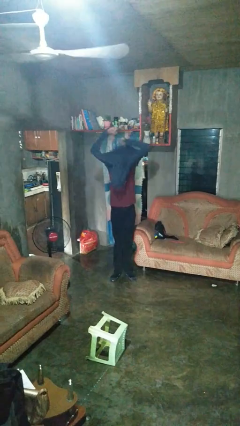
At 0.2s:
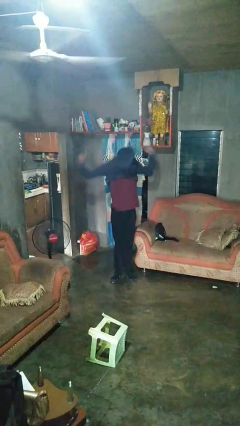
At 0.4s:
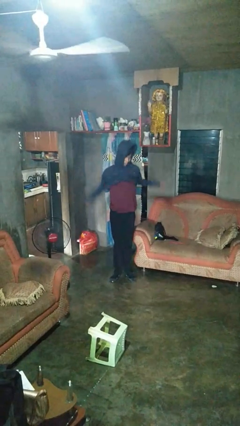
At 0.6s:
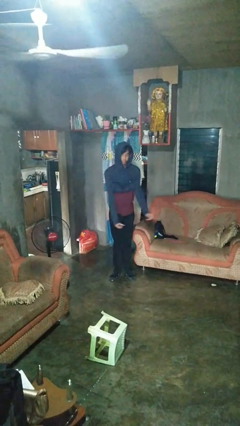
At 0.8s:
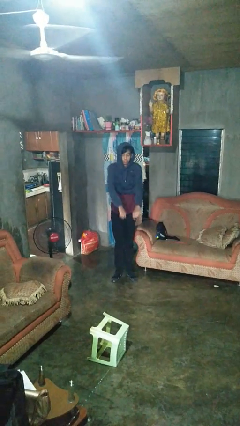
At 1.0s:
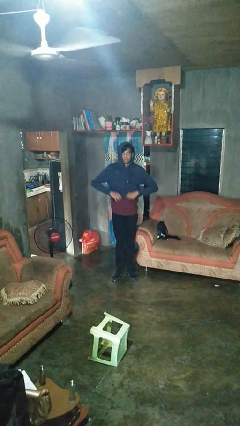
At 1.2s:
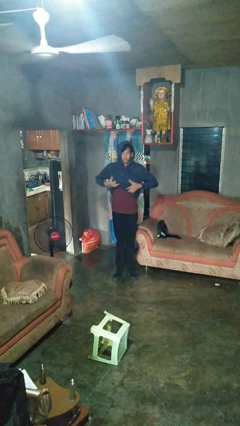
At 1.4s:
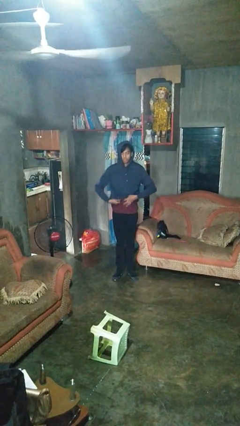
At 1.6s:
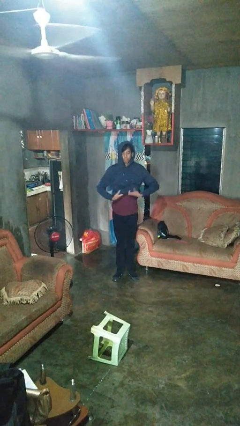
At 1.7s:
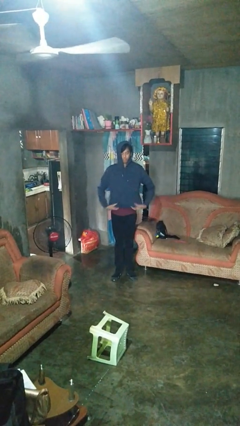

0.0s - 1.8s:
person puts on hoodie

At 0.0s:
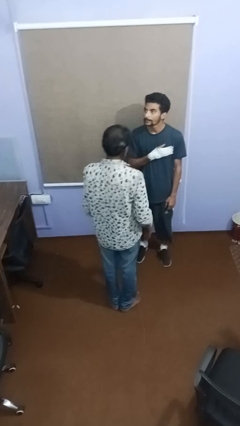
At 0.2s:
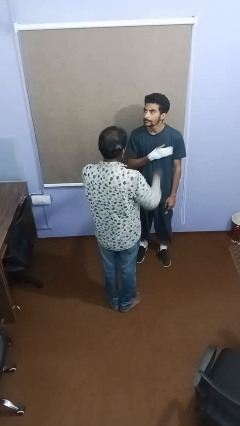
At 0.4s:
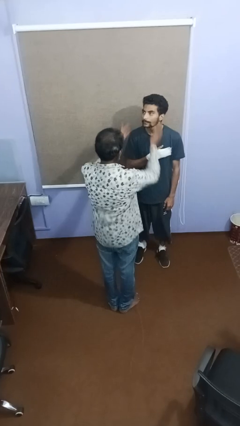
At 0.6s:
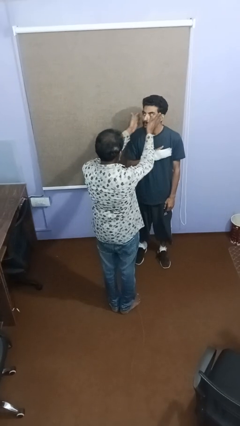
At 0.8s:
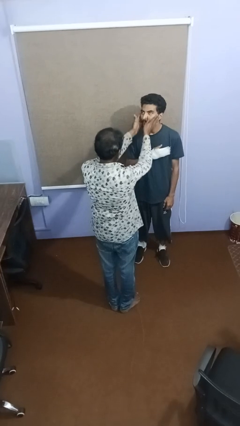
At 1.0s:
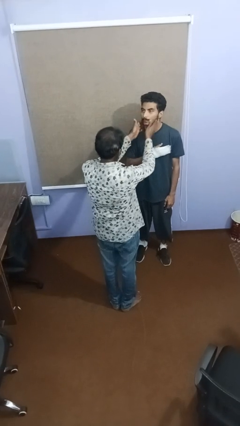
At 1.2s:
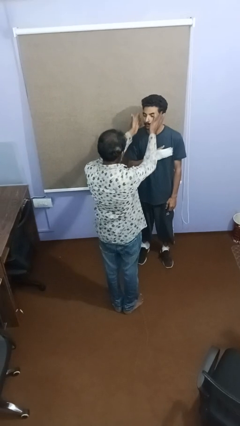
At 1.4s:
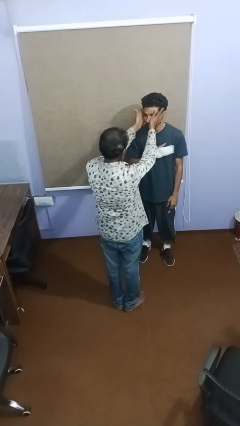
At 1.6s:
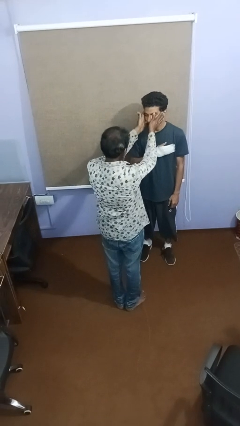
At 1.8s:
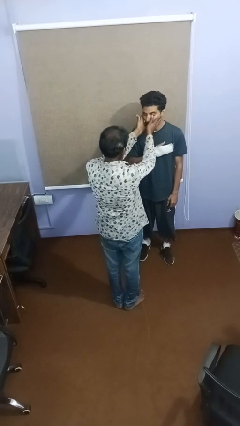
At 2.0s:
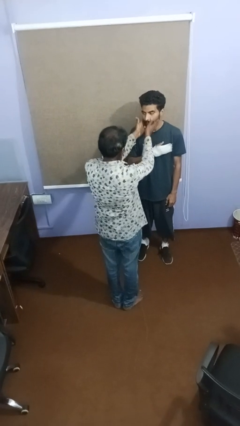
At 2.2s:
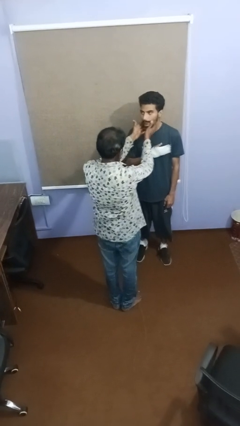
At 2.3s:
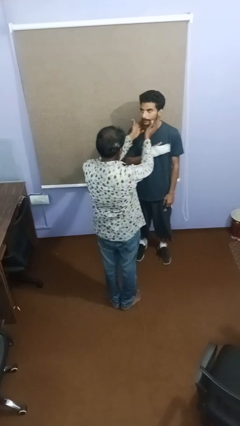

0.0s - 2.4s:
person touches face of person

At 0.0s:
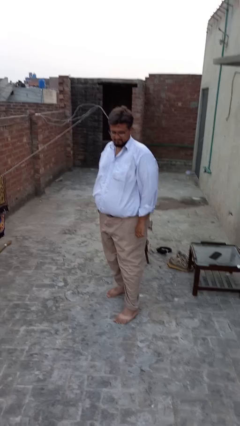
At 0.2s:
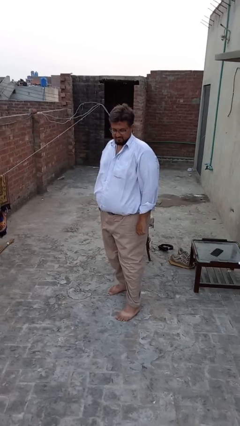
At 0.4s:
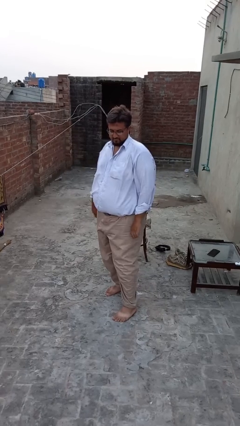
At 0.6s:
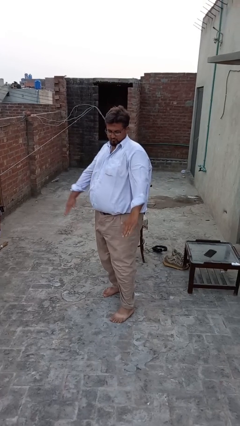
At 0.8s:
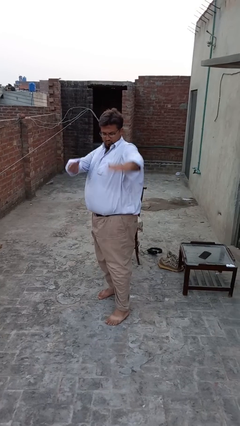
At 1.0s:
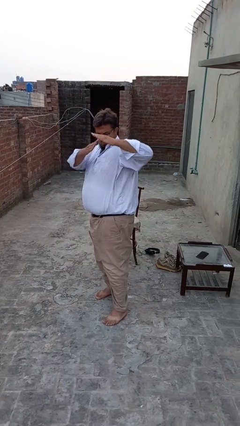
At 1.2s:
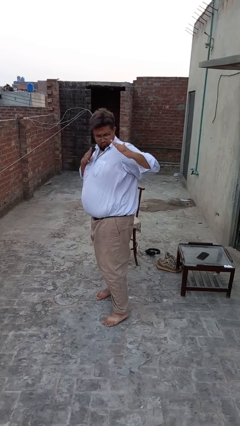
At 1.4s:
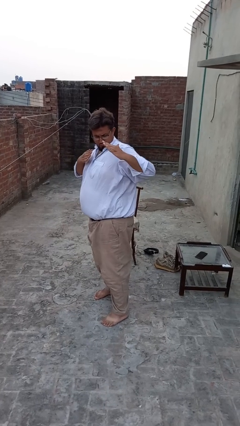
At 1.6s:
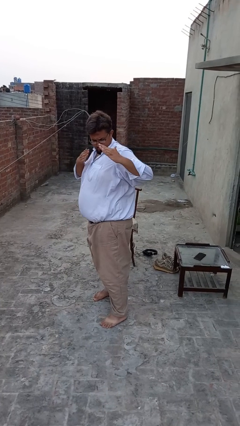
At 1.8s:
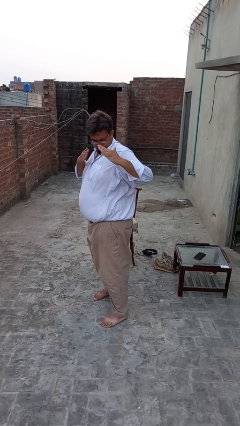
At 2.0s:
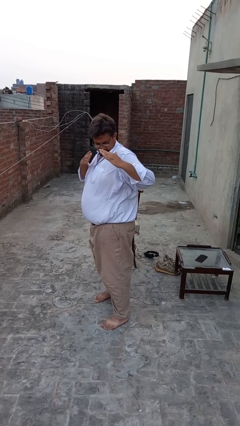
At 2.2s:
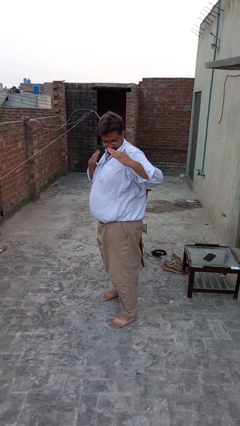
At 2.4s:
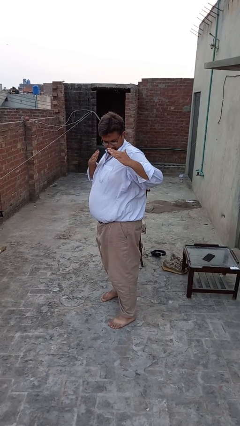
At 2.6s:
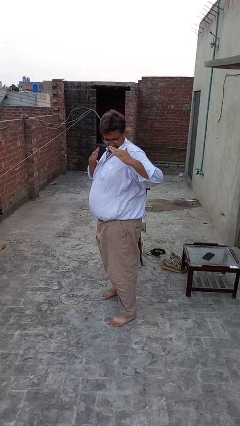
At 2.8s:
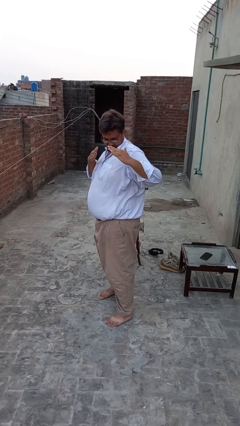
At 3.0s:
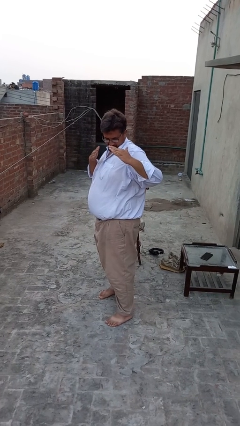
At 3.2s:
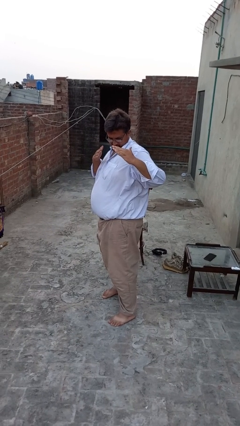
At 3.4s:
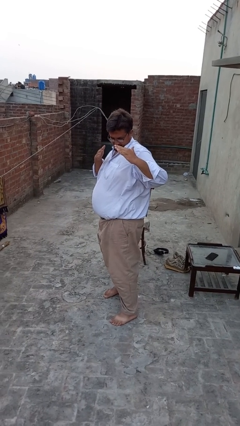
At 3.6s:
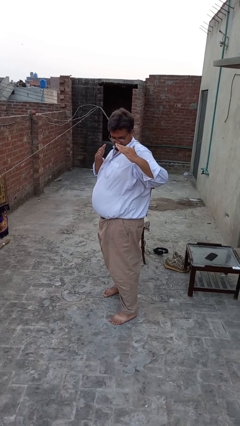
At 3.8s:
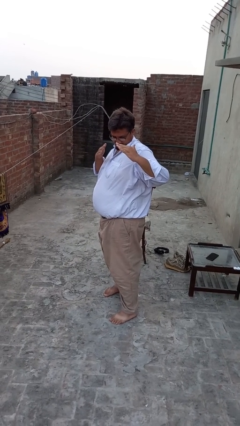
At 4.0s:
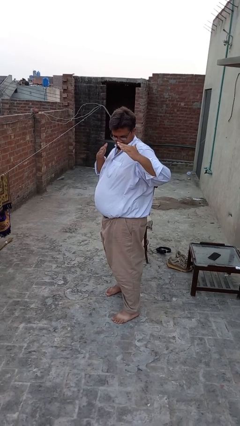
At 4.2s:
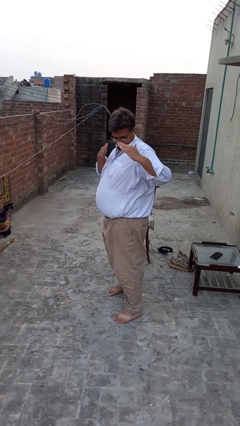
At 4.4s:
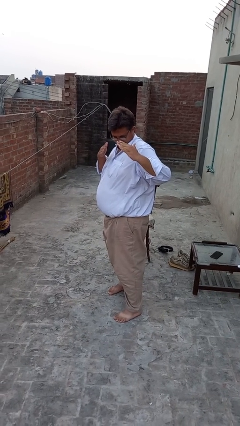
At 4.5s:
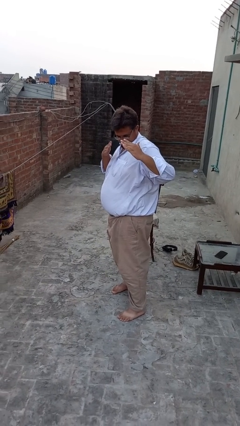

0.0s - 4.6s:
person karate chop

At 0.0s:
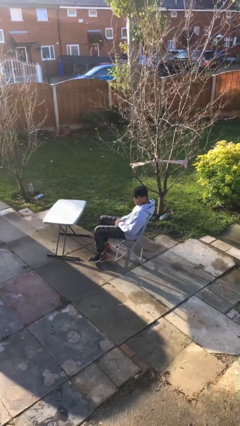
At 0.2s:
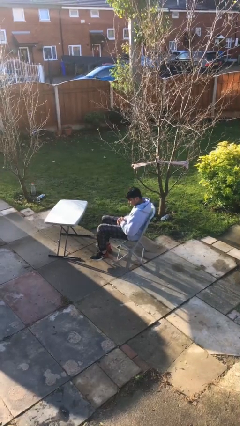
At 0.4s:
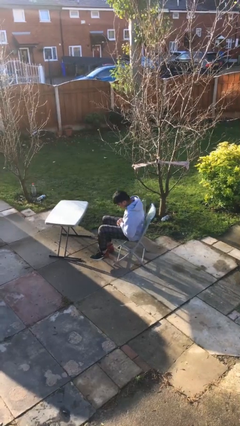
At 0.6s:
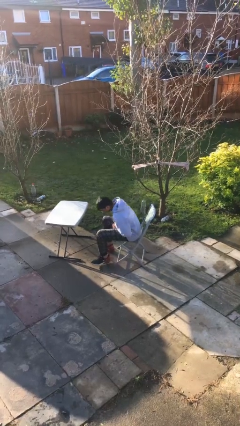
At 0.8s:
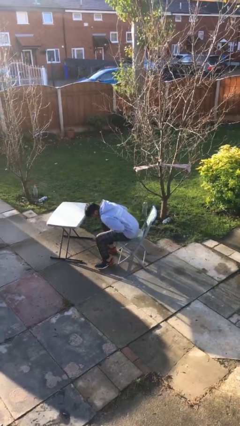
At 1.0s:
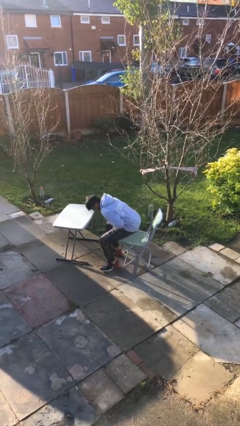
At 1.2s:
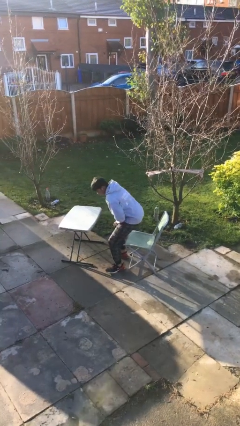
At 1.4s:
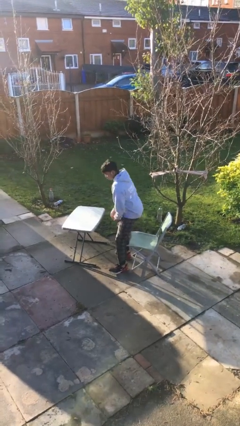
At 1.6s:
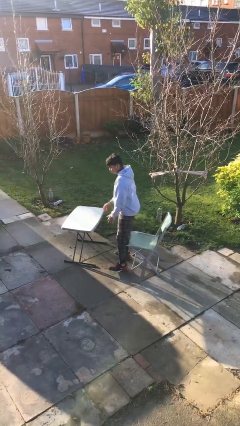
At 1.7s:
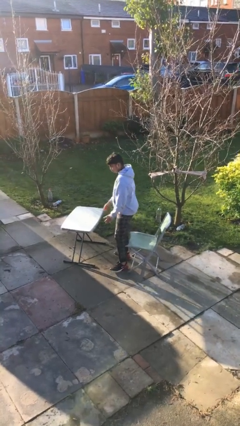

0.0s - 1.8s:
person stands up

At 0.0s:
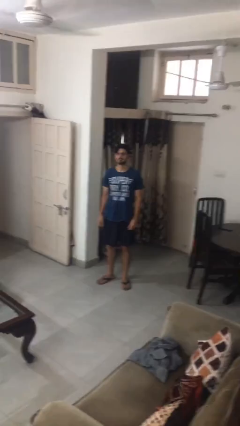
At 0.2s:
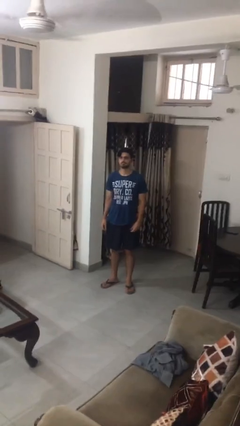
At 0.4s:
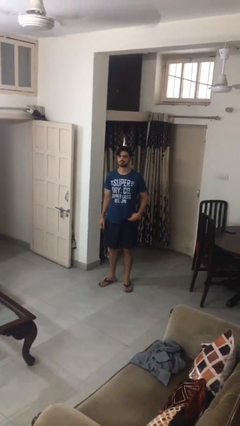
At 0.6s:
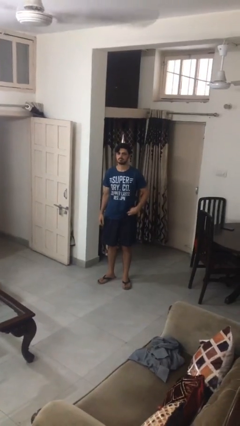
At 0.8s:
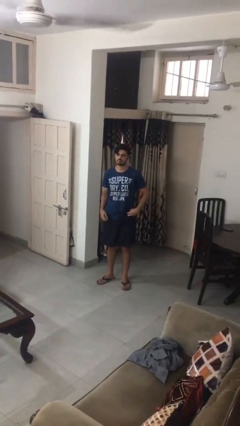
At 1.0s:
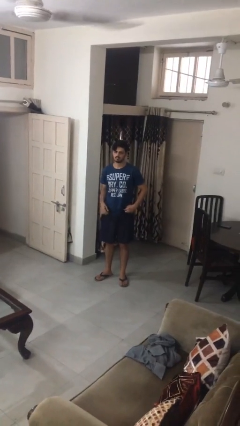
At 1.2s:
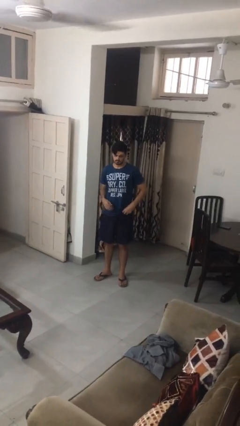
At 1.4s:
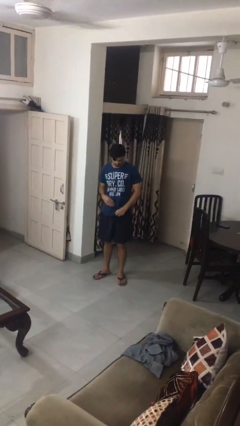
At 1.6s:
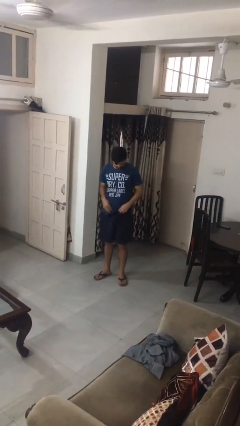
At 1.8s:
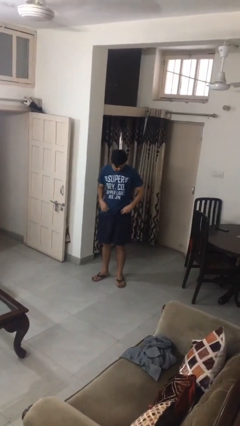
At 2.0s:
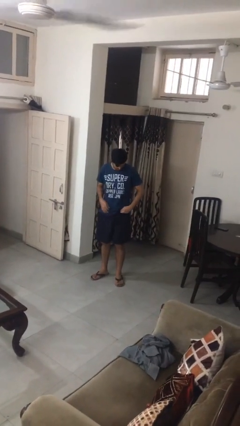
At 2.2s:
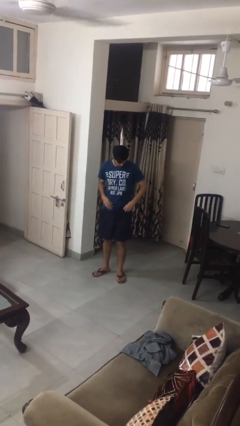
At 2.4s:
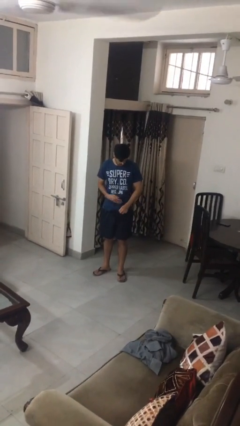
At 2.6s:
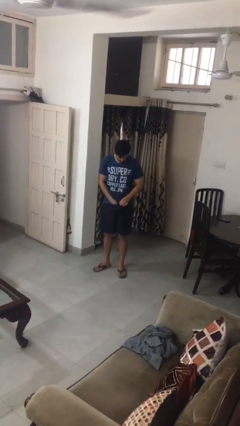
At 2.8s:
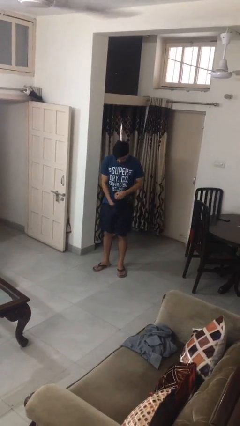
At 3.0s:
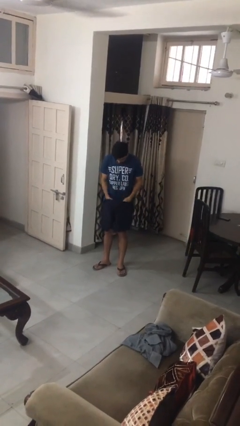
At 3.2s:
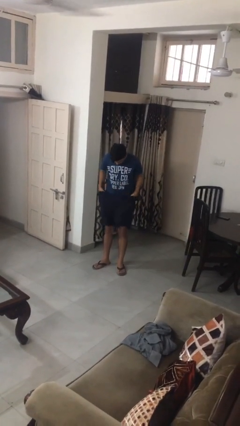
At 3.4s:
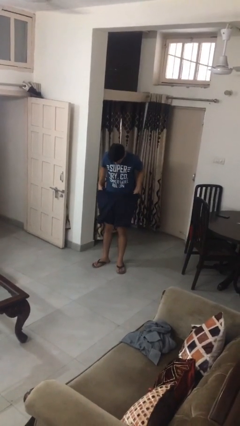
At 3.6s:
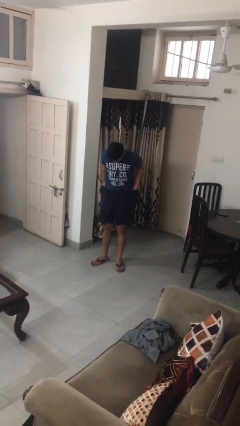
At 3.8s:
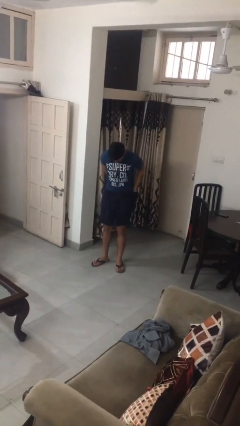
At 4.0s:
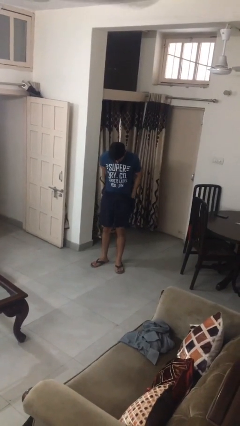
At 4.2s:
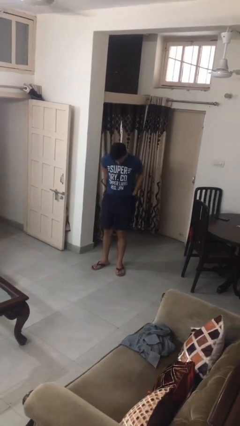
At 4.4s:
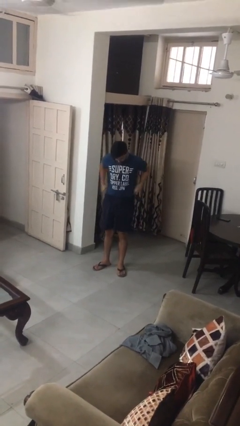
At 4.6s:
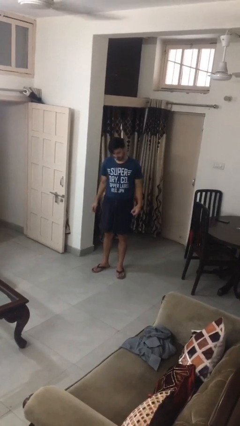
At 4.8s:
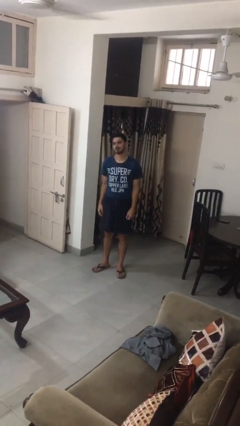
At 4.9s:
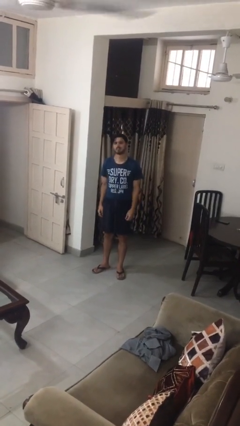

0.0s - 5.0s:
person tucks in shirt

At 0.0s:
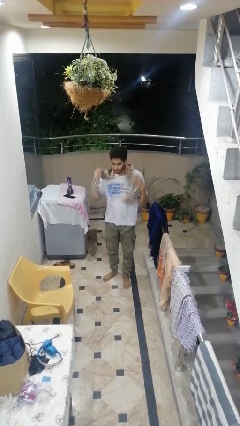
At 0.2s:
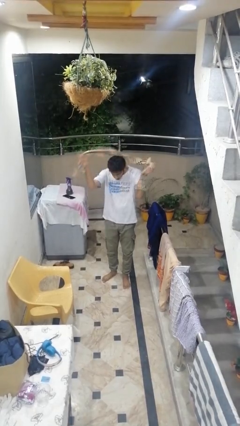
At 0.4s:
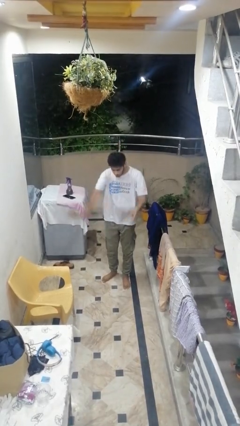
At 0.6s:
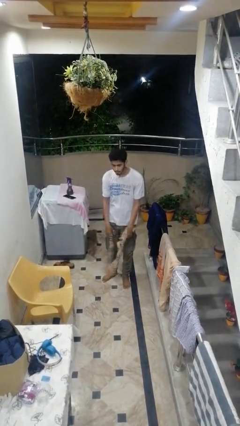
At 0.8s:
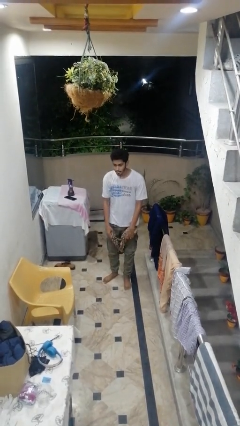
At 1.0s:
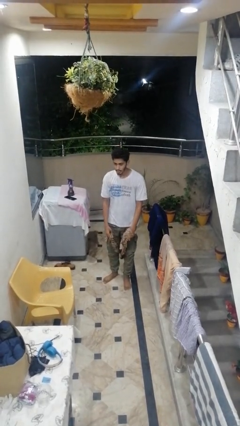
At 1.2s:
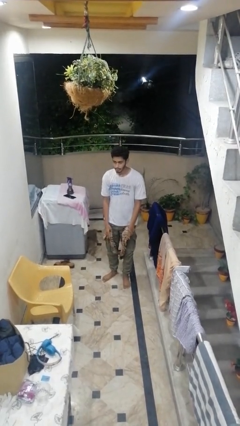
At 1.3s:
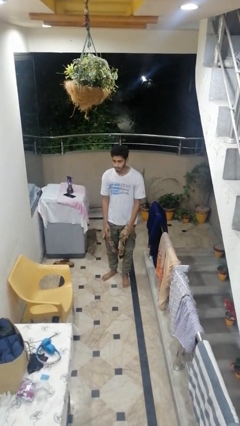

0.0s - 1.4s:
person takes off scarf

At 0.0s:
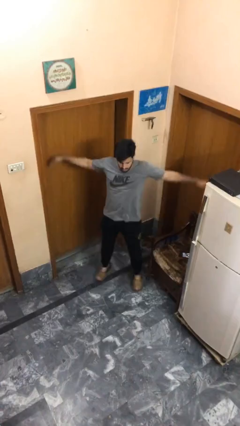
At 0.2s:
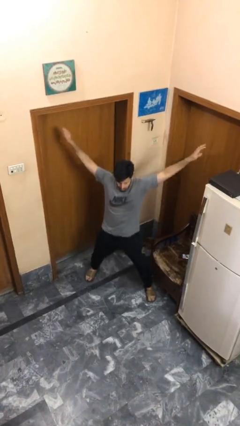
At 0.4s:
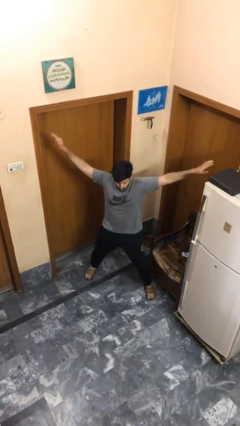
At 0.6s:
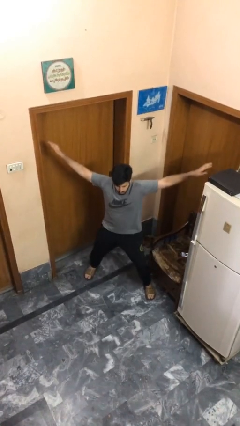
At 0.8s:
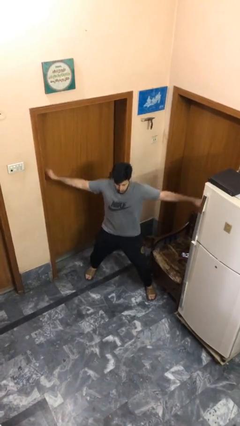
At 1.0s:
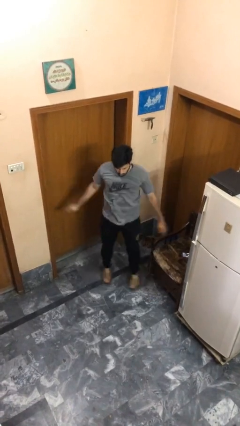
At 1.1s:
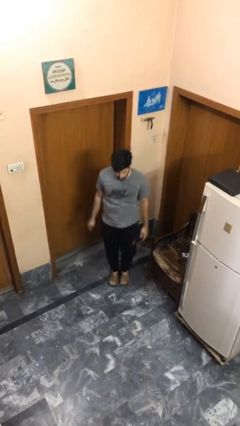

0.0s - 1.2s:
person exercises with jumping jacks
